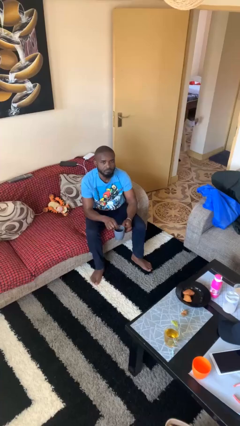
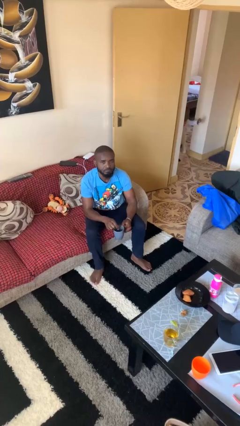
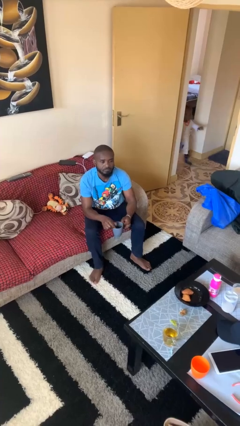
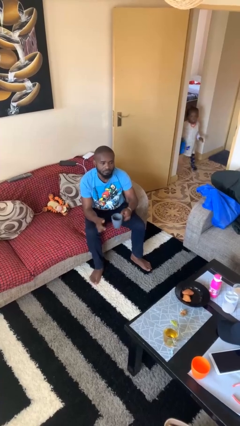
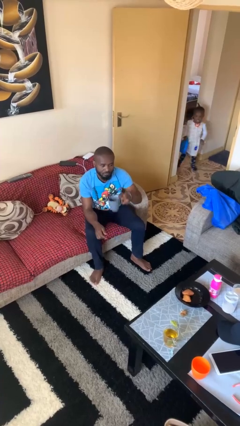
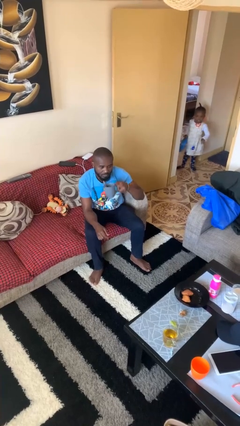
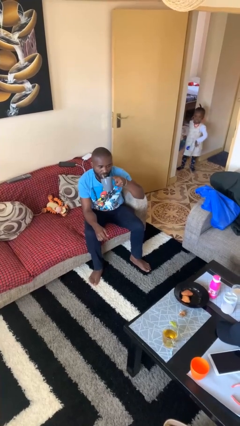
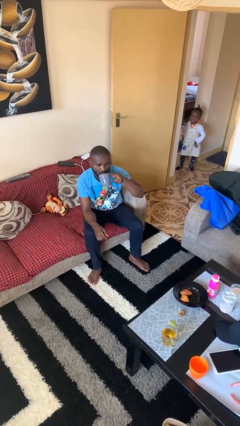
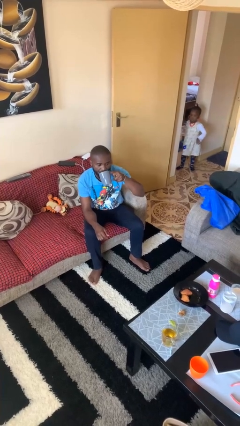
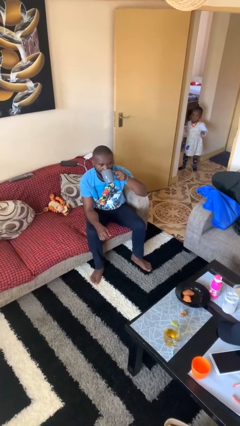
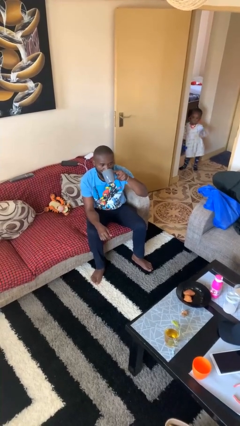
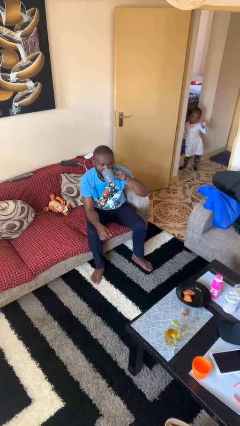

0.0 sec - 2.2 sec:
person drinks from mug

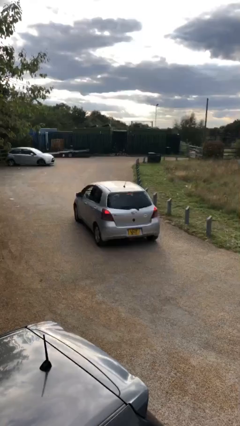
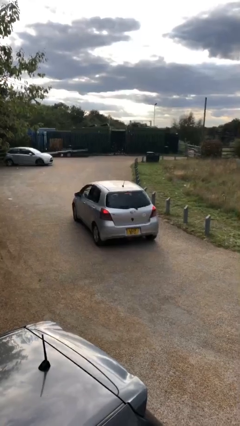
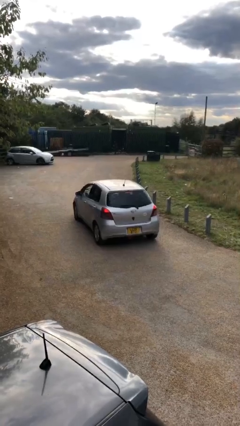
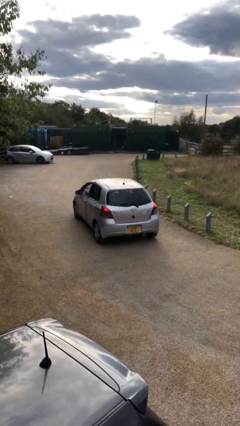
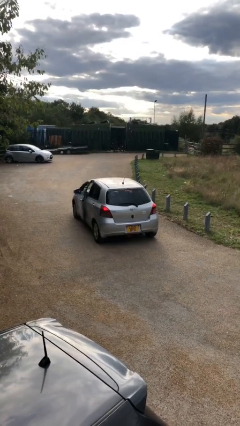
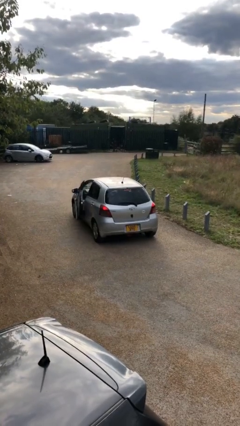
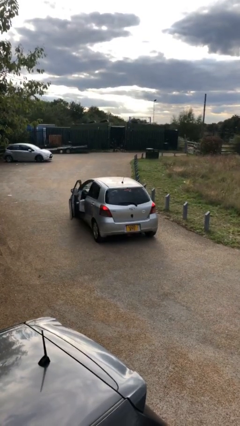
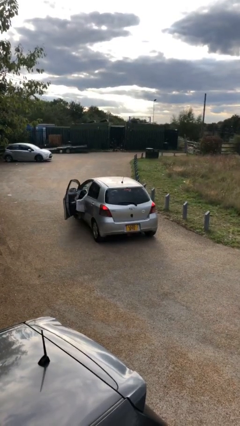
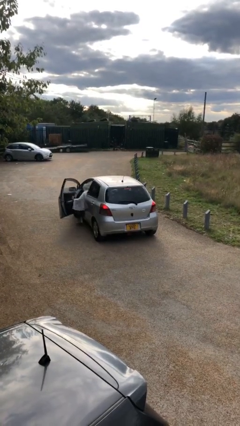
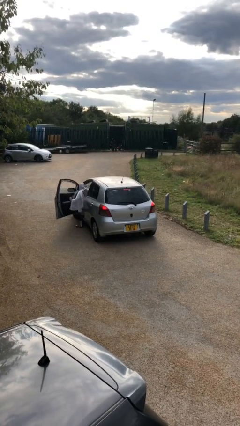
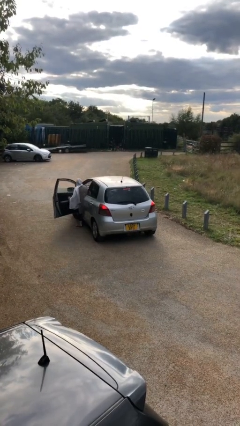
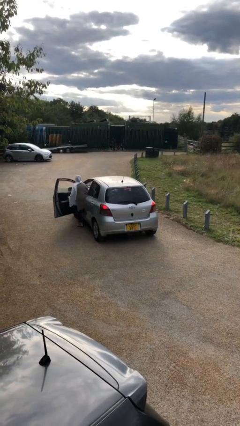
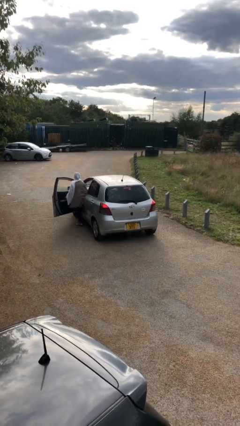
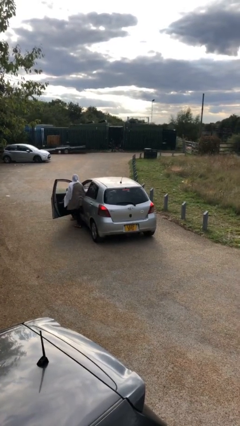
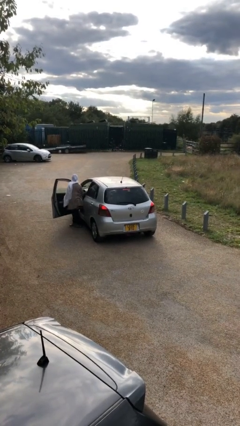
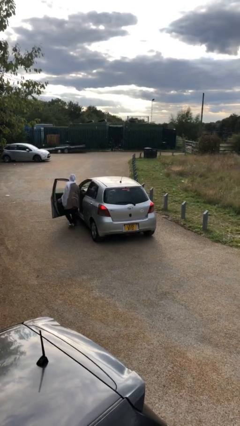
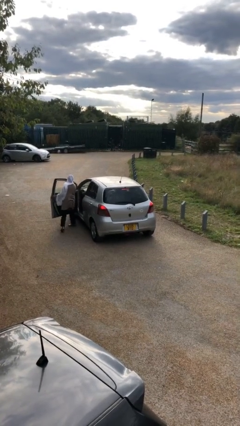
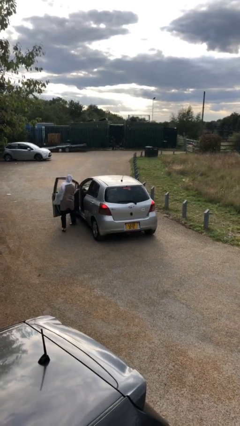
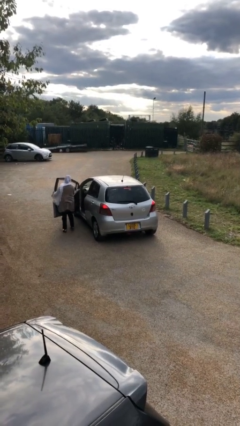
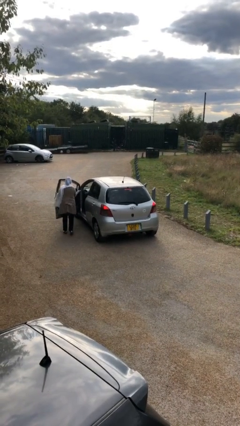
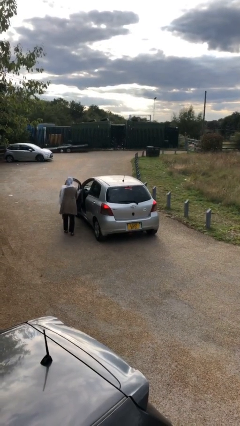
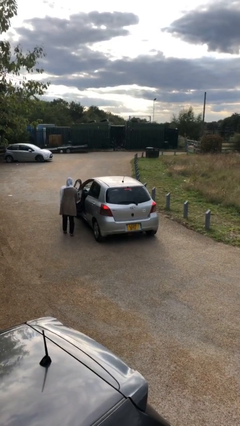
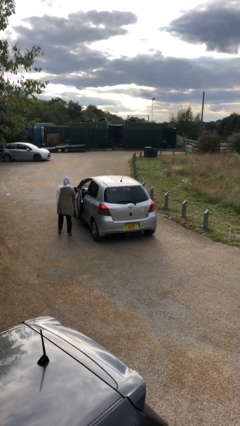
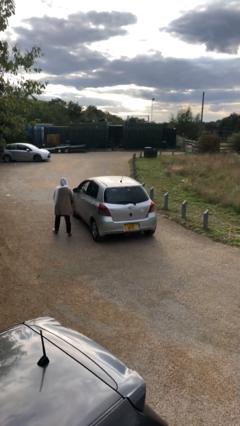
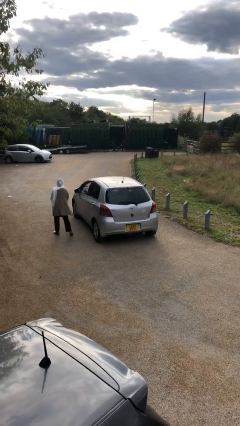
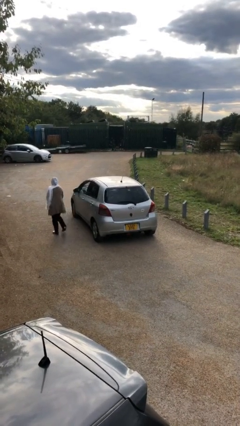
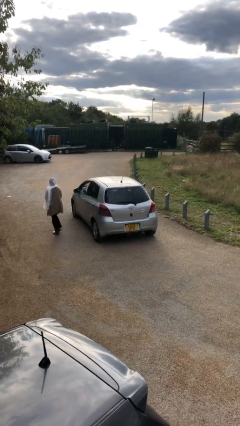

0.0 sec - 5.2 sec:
car drops off person

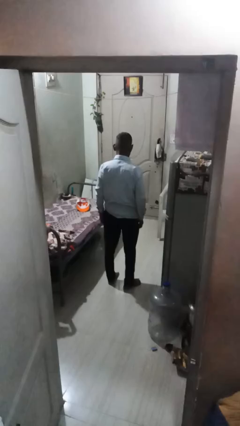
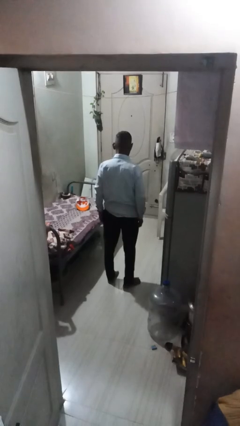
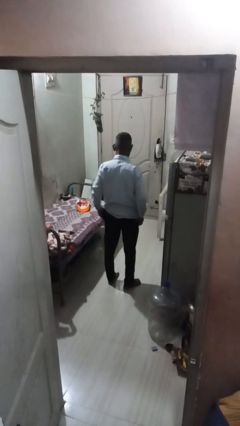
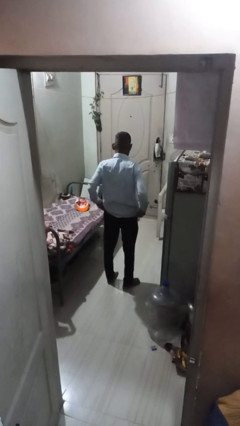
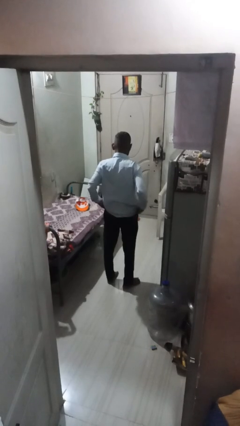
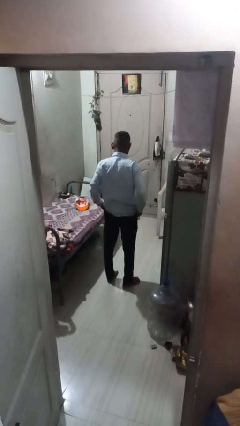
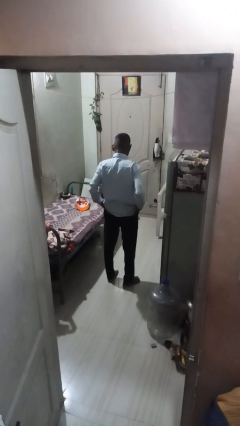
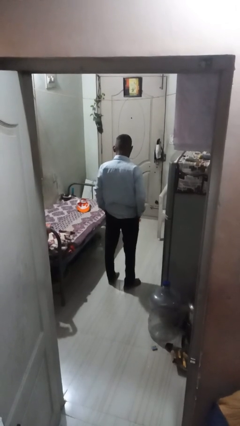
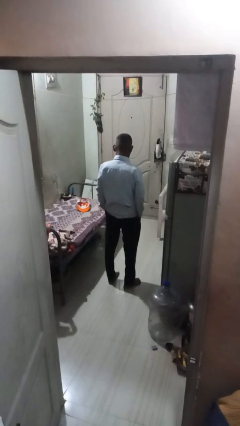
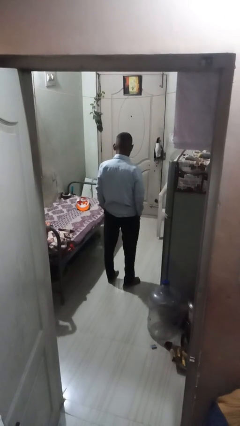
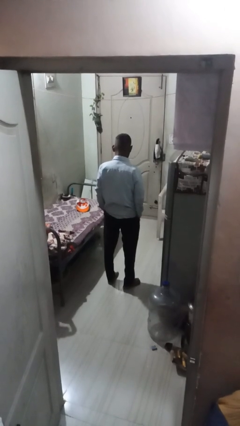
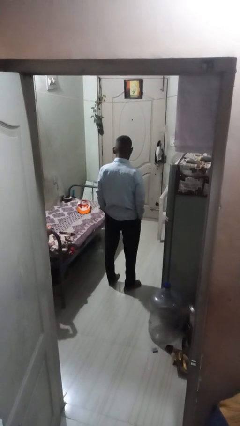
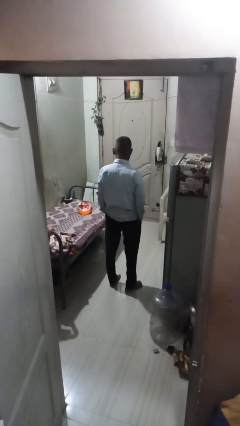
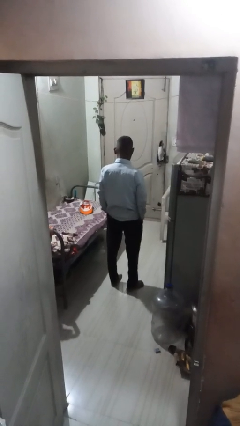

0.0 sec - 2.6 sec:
person puts hands in back pockets

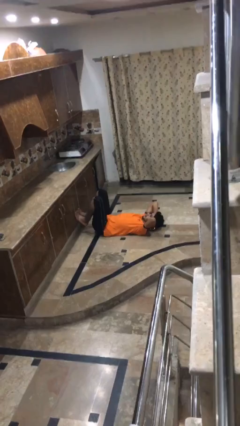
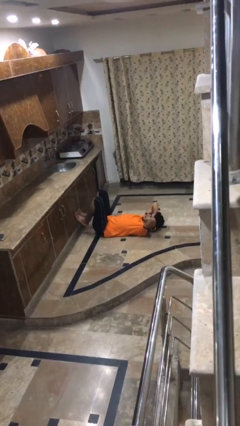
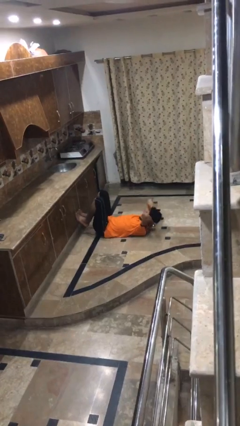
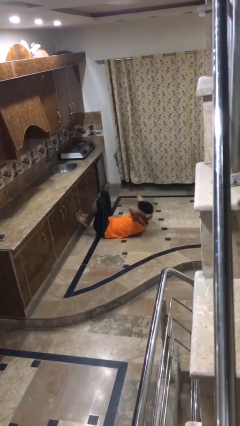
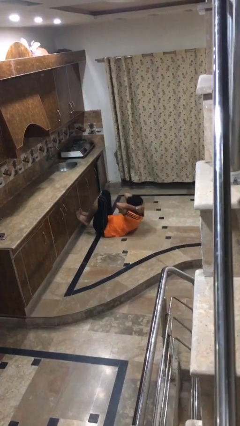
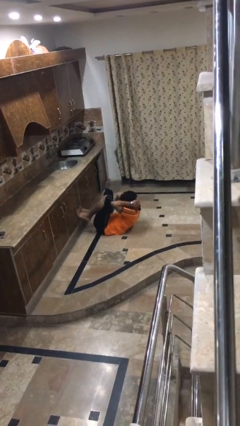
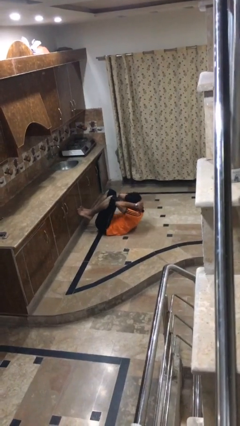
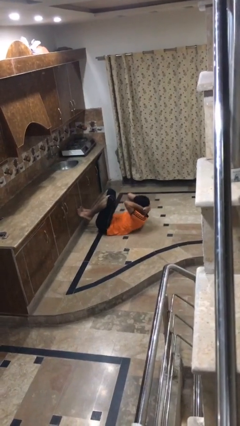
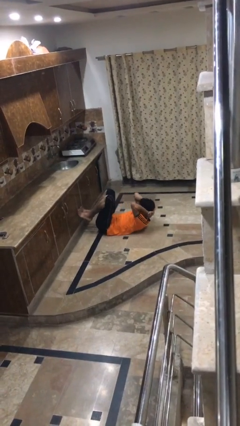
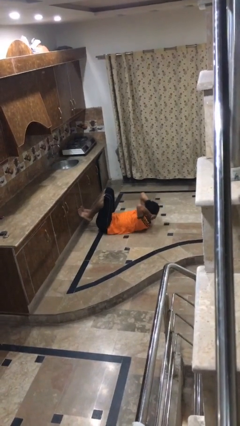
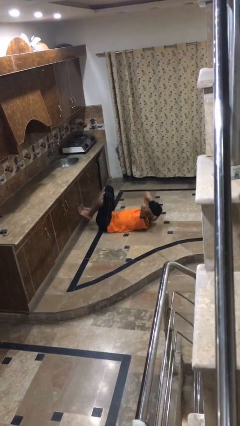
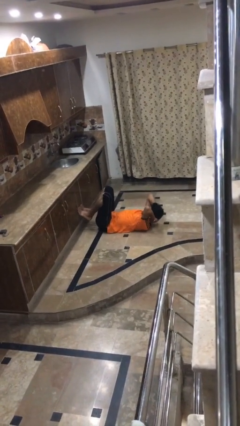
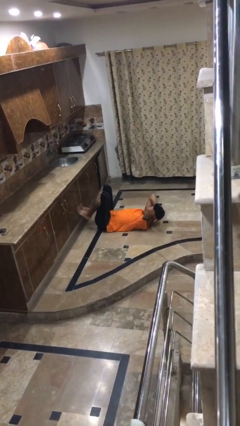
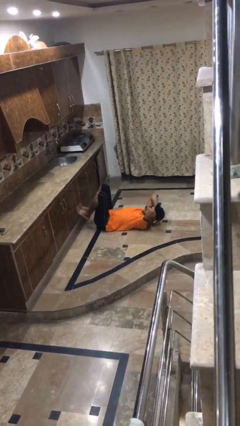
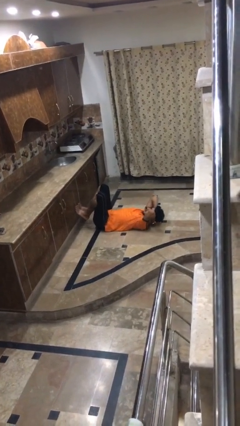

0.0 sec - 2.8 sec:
person exercises with situp

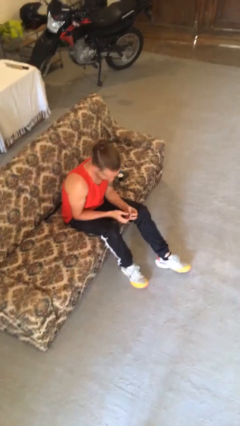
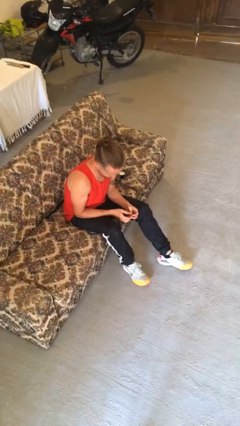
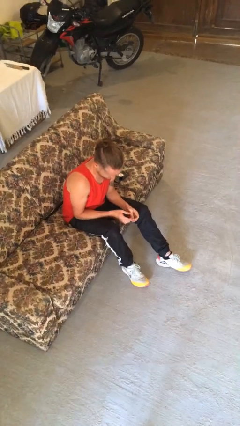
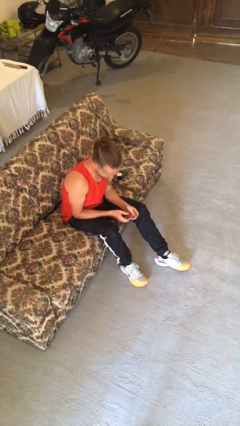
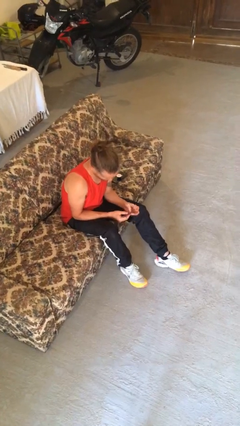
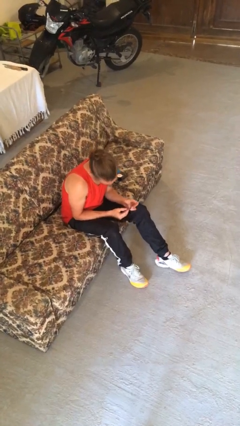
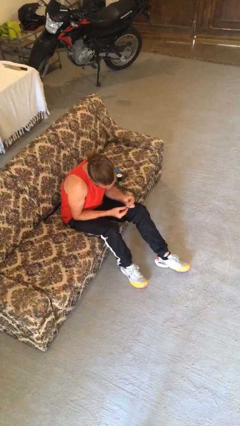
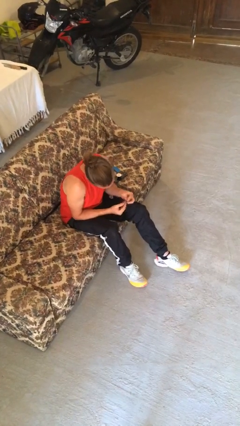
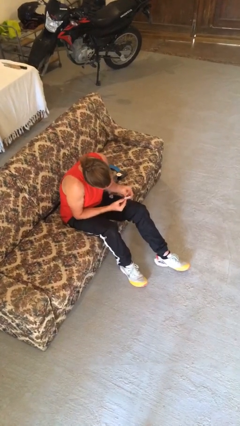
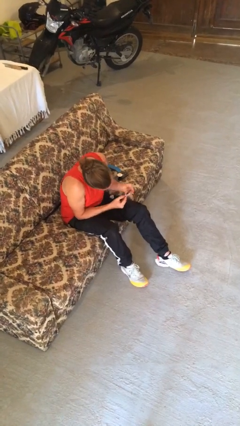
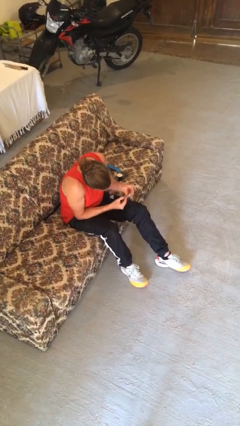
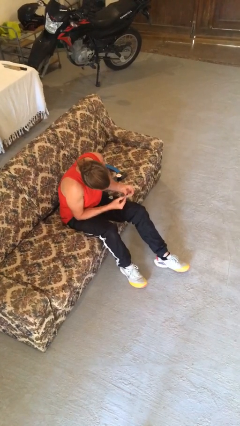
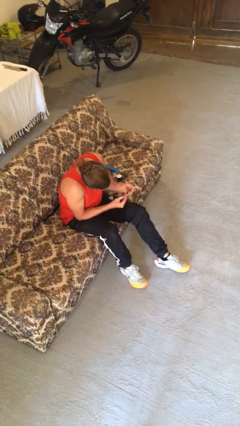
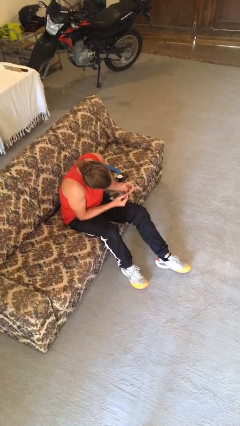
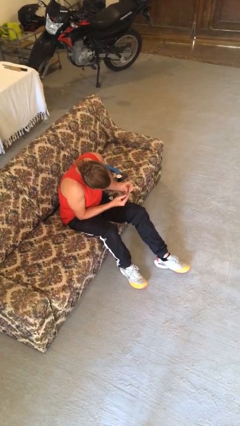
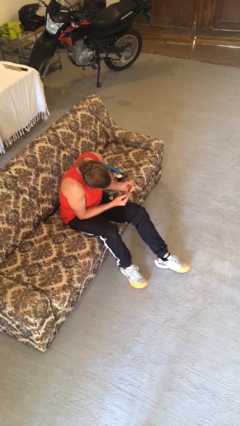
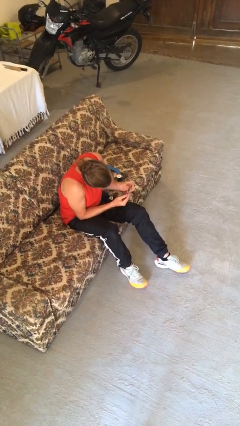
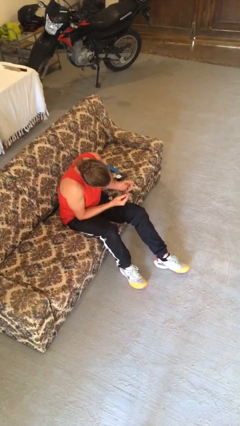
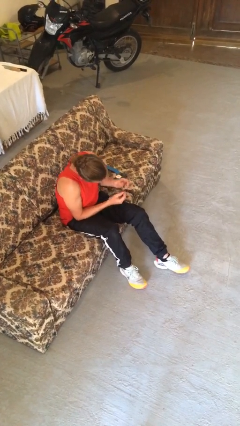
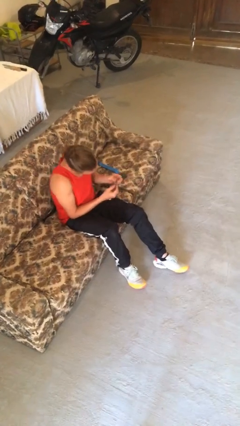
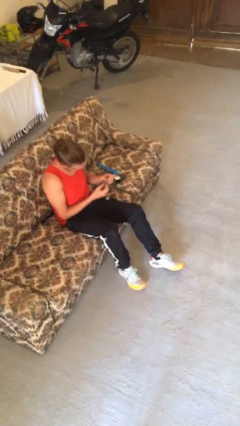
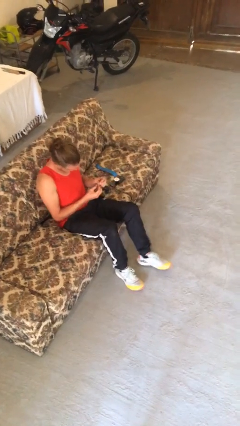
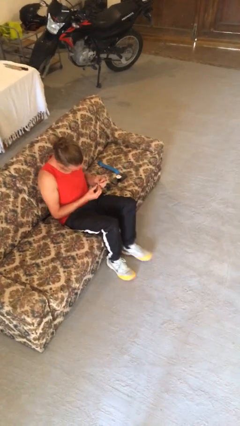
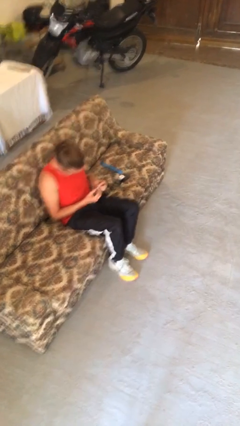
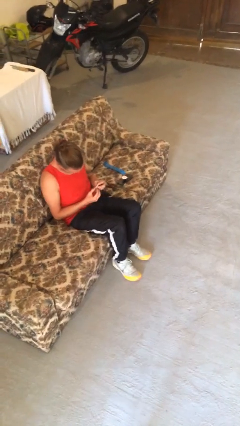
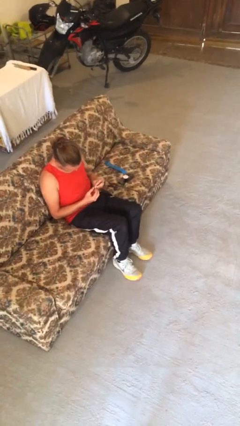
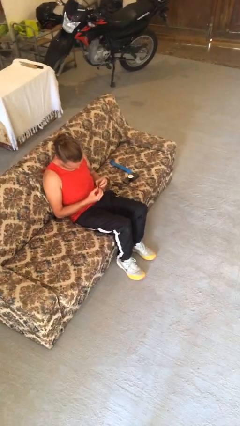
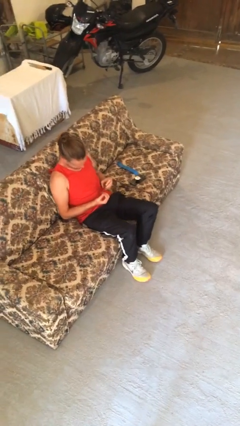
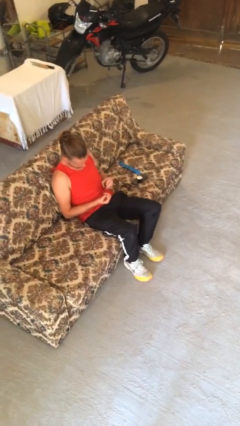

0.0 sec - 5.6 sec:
person clips fingernails
